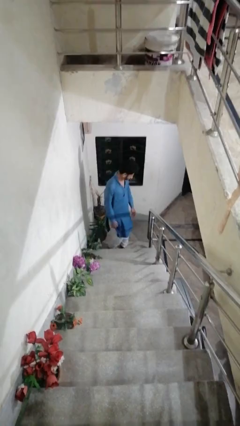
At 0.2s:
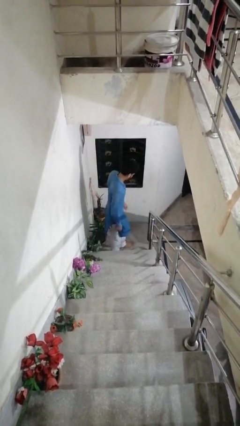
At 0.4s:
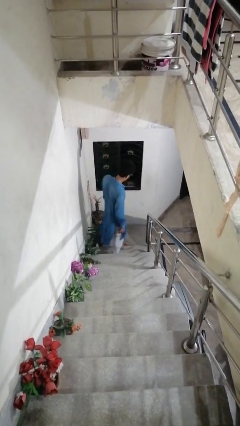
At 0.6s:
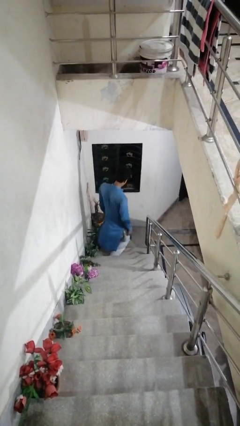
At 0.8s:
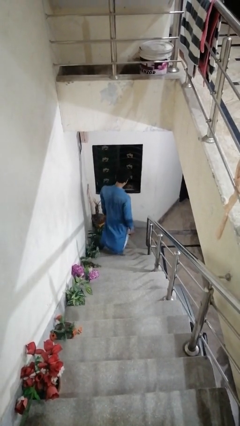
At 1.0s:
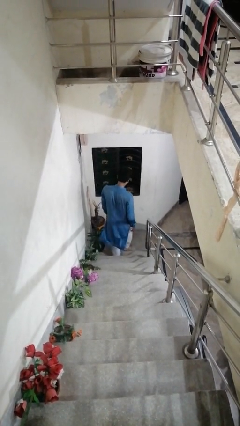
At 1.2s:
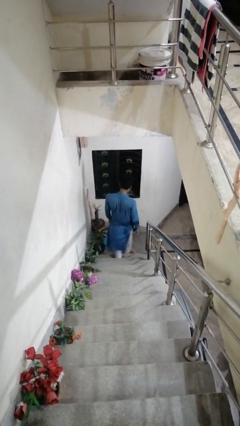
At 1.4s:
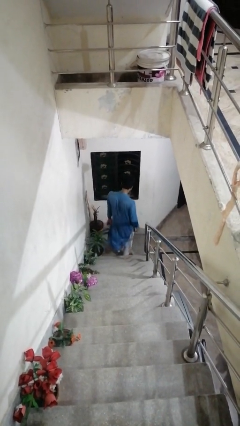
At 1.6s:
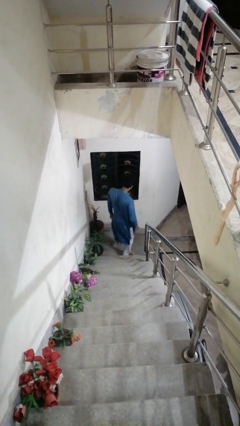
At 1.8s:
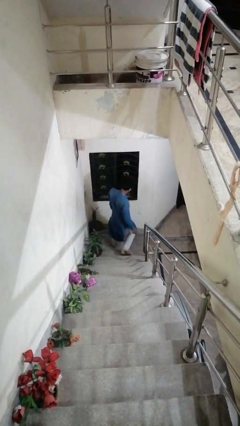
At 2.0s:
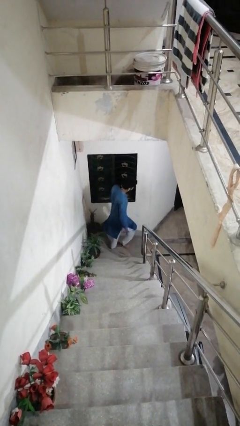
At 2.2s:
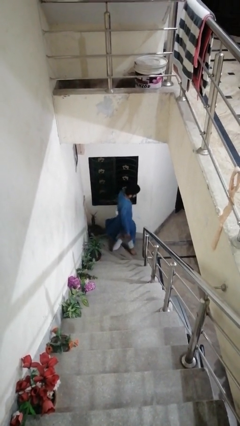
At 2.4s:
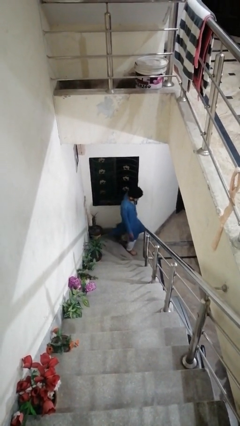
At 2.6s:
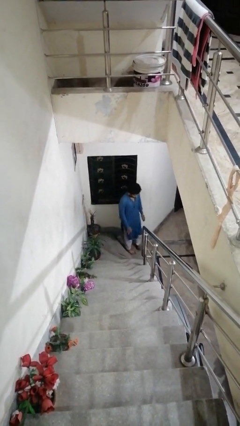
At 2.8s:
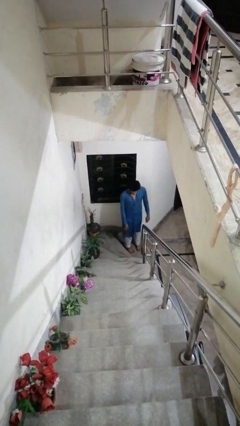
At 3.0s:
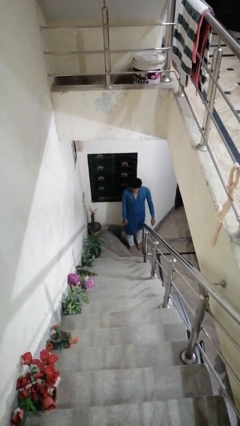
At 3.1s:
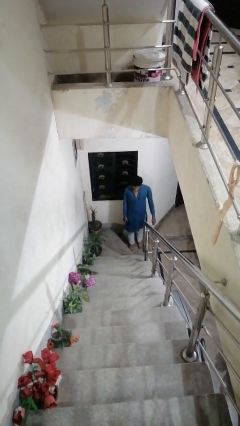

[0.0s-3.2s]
person climbs down stairs

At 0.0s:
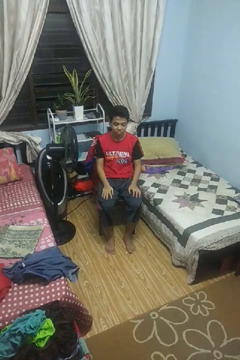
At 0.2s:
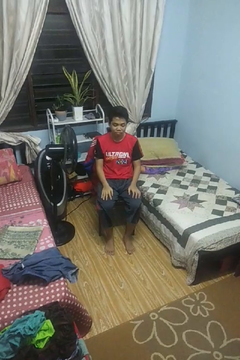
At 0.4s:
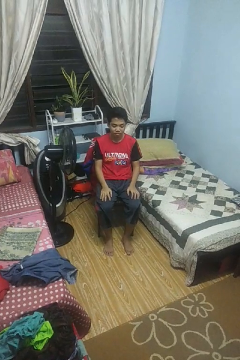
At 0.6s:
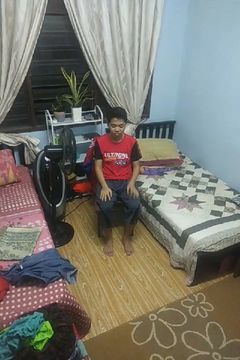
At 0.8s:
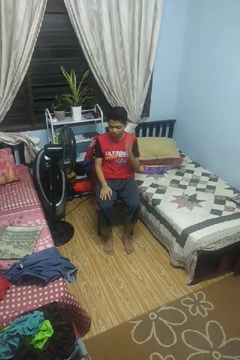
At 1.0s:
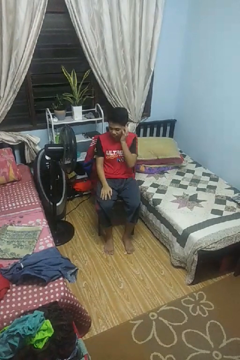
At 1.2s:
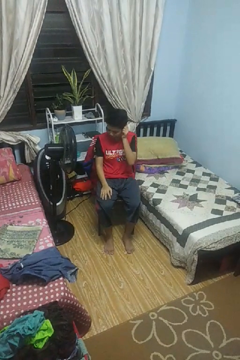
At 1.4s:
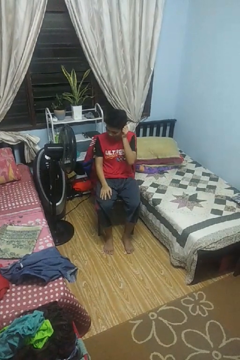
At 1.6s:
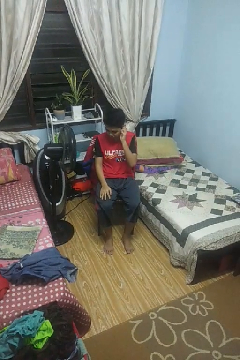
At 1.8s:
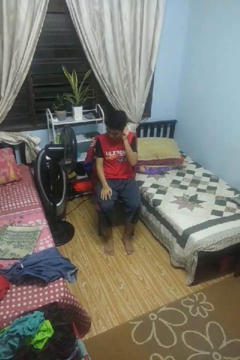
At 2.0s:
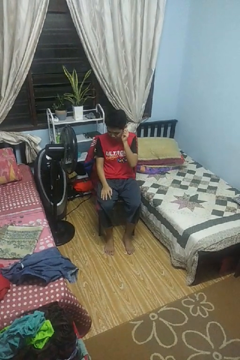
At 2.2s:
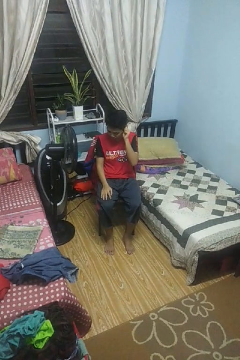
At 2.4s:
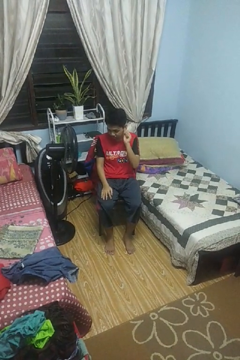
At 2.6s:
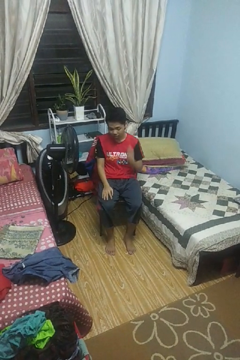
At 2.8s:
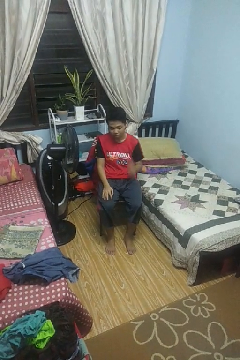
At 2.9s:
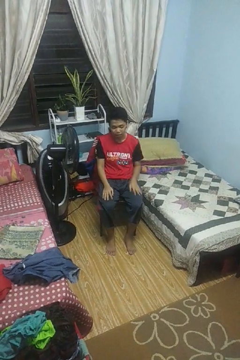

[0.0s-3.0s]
person touches earlobe

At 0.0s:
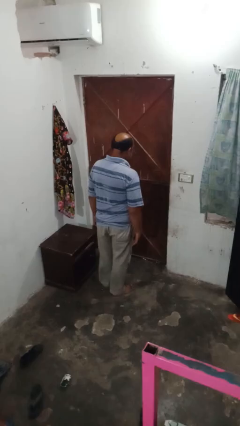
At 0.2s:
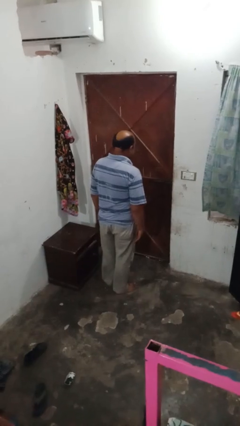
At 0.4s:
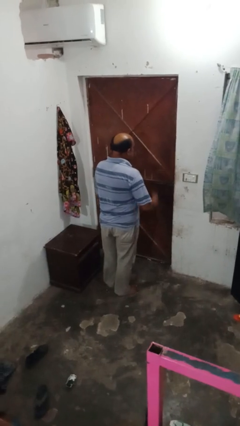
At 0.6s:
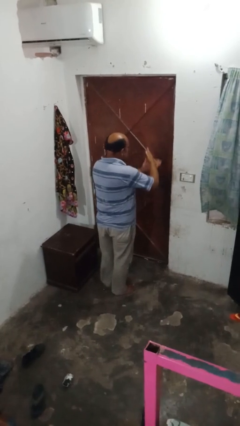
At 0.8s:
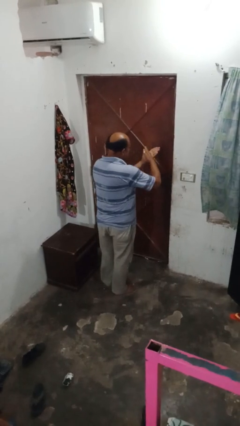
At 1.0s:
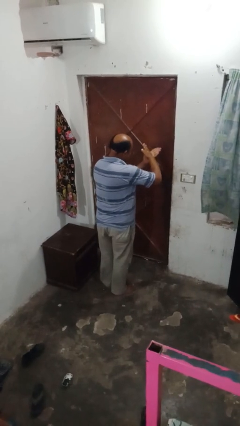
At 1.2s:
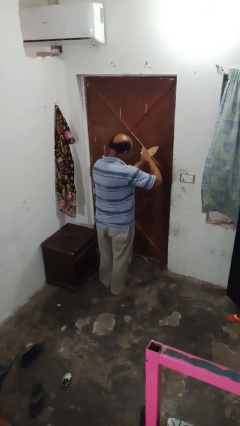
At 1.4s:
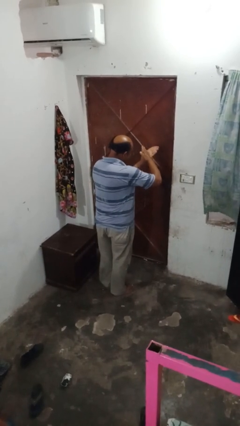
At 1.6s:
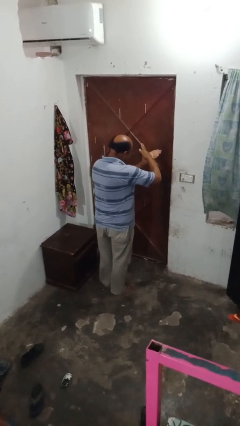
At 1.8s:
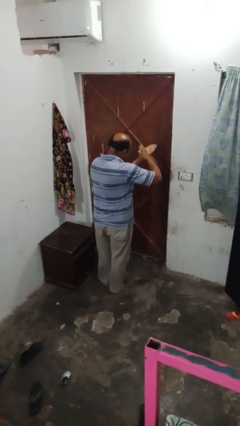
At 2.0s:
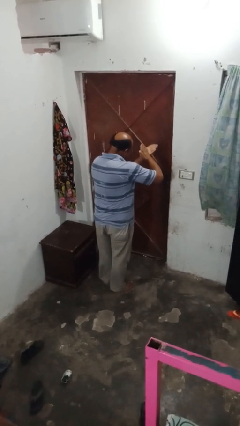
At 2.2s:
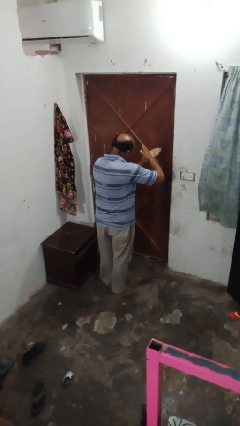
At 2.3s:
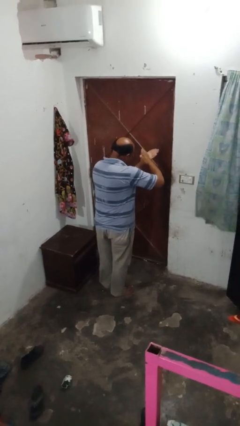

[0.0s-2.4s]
person gestures cut

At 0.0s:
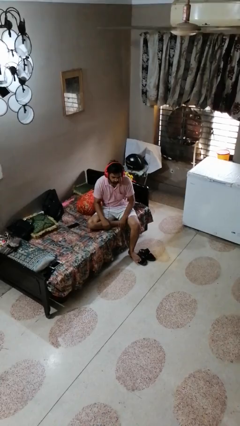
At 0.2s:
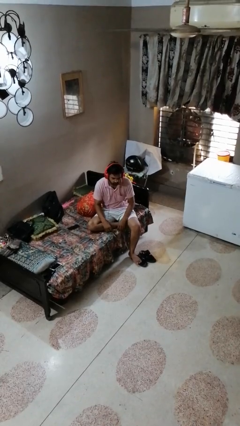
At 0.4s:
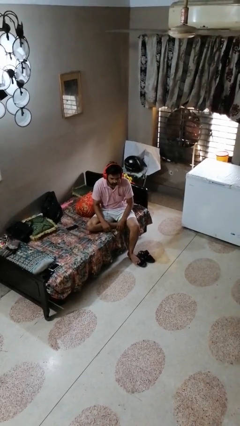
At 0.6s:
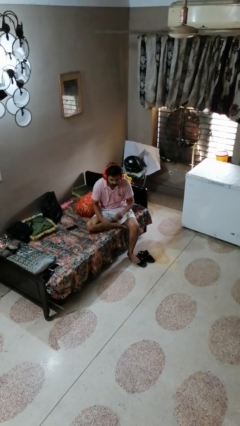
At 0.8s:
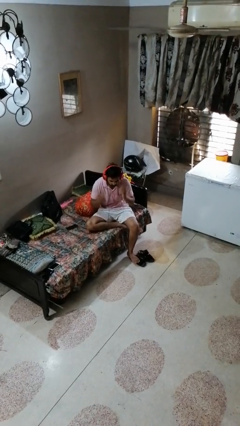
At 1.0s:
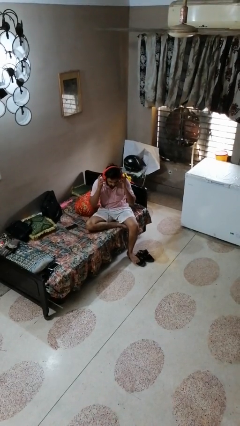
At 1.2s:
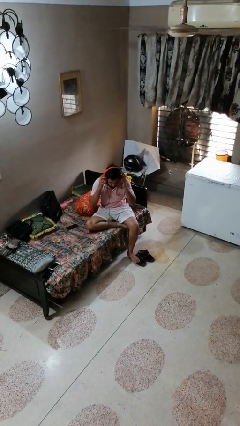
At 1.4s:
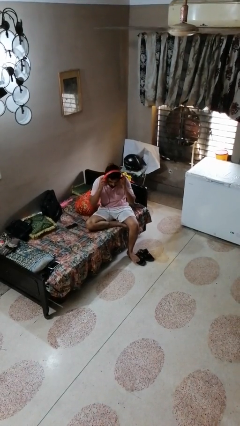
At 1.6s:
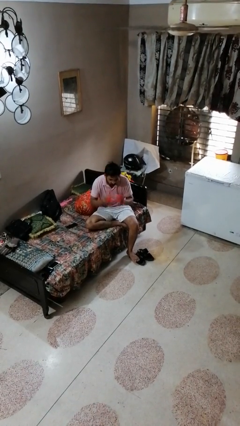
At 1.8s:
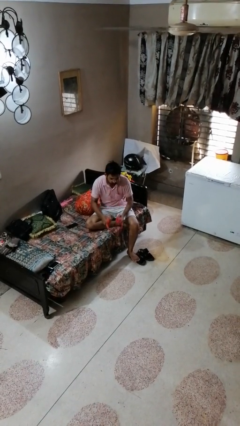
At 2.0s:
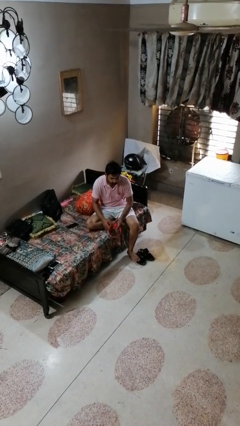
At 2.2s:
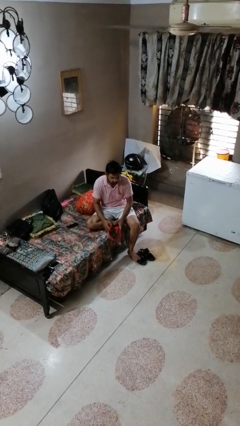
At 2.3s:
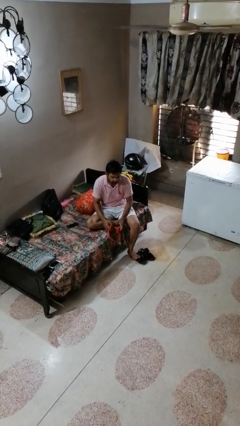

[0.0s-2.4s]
person takes off headphones

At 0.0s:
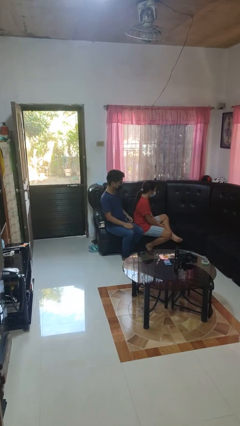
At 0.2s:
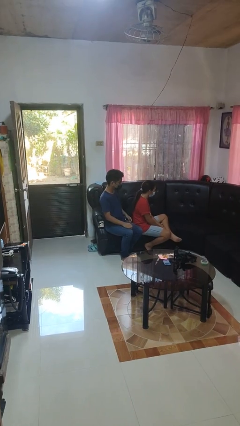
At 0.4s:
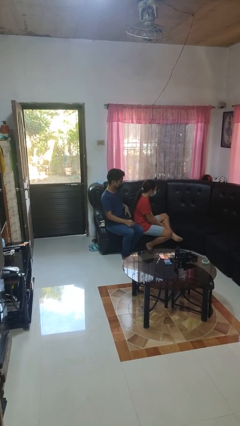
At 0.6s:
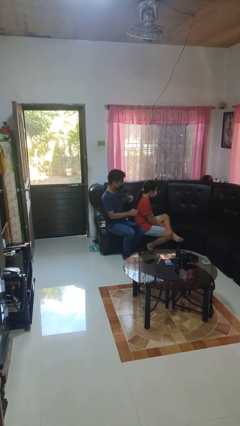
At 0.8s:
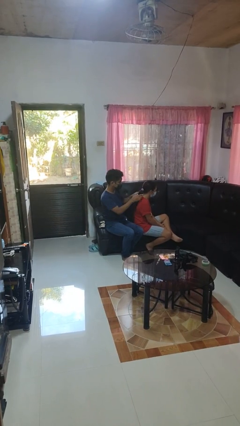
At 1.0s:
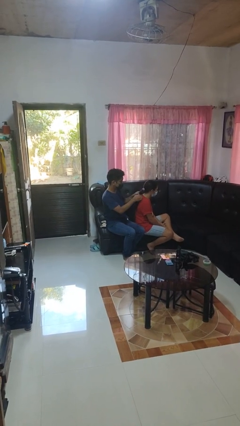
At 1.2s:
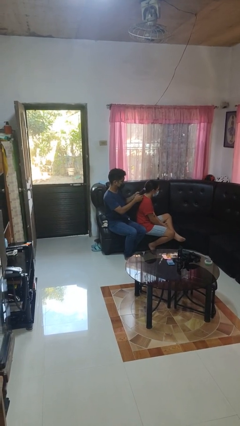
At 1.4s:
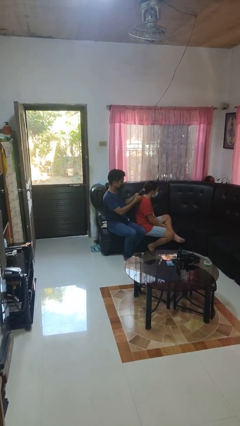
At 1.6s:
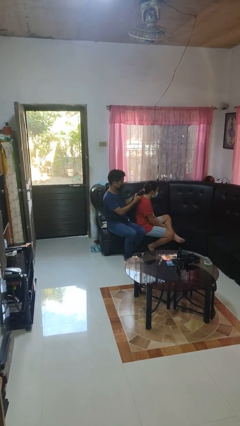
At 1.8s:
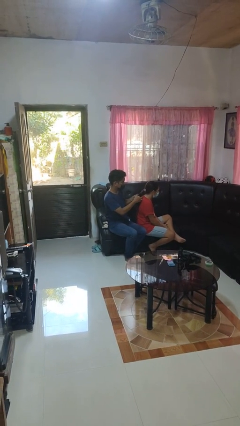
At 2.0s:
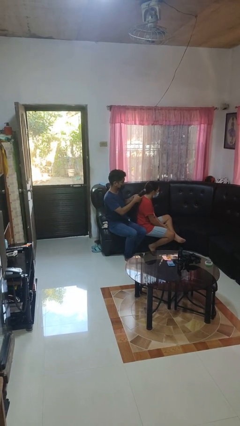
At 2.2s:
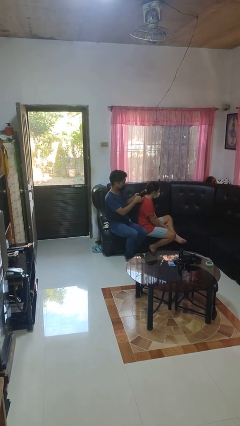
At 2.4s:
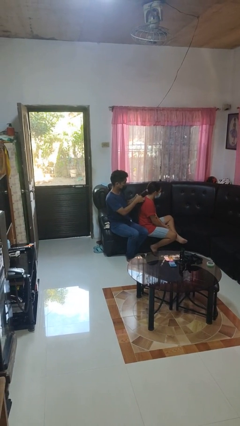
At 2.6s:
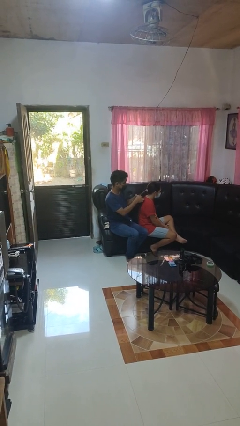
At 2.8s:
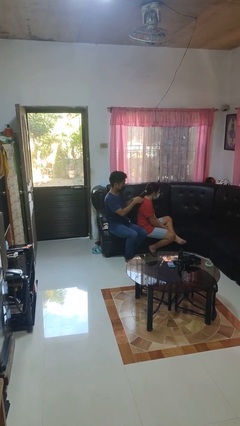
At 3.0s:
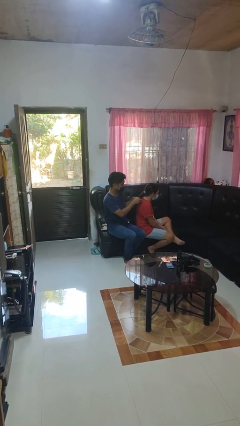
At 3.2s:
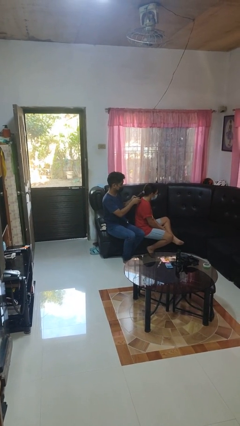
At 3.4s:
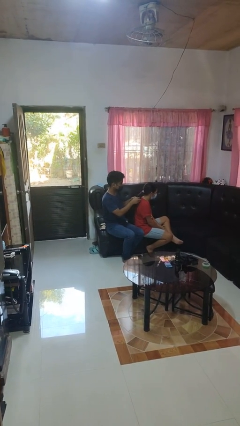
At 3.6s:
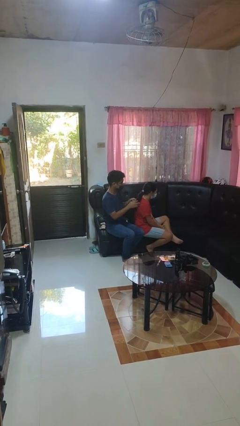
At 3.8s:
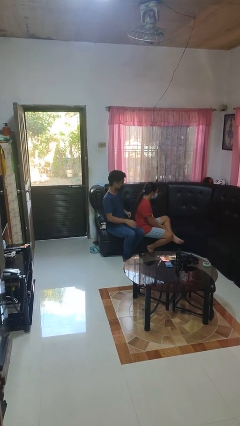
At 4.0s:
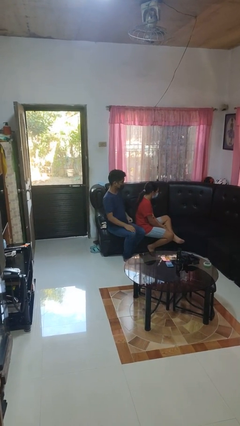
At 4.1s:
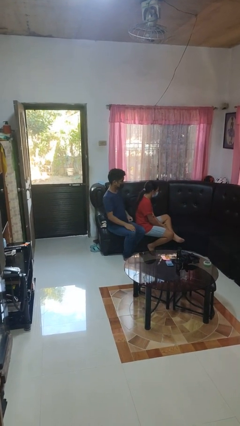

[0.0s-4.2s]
person braids hair of person

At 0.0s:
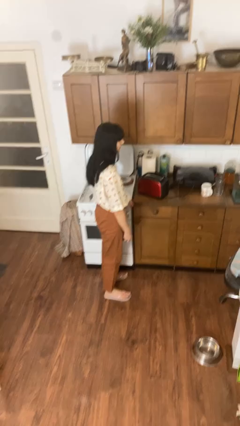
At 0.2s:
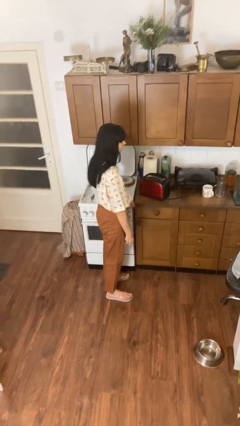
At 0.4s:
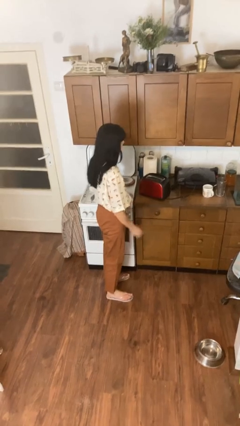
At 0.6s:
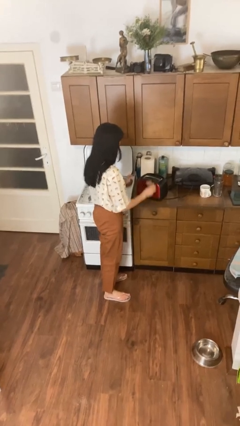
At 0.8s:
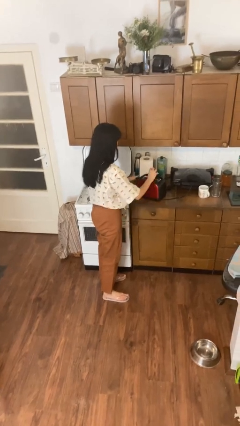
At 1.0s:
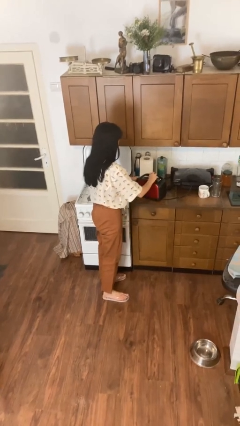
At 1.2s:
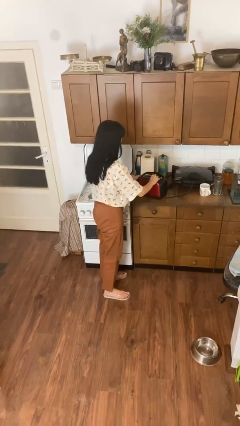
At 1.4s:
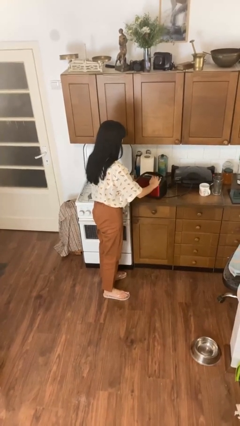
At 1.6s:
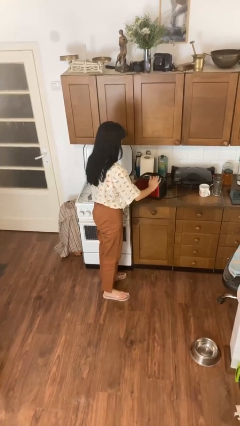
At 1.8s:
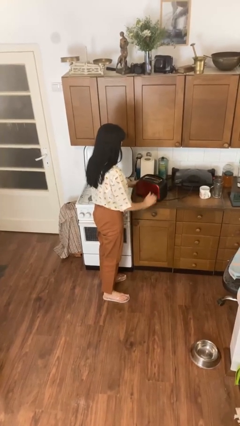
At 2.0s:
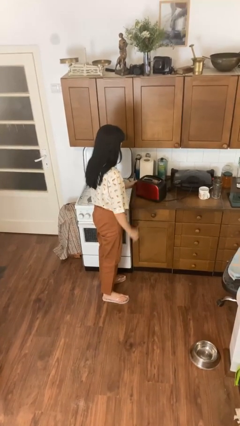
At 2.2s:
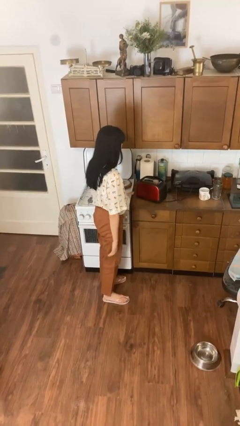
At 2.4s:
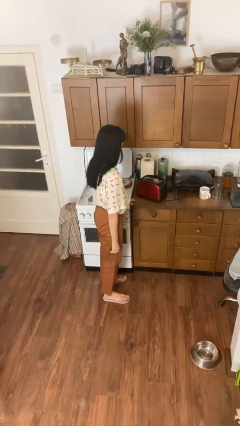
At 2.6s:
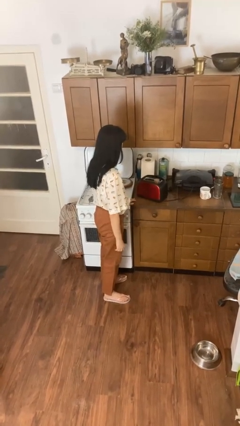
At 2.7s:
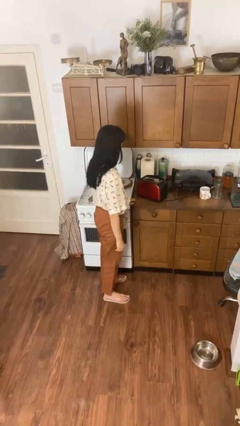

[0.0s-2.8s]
person puts object into toaster
